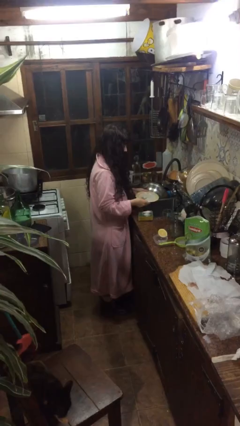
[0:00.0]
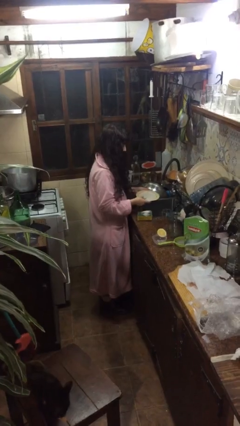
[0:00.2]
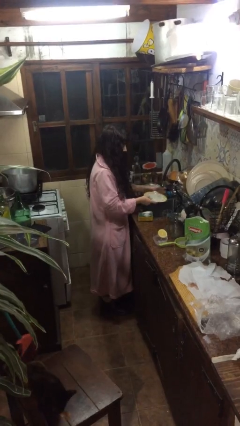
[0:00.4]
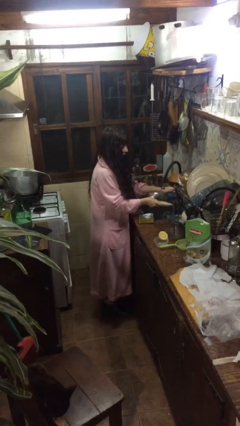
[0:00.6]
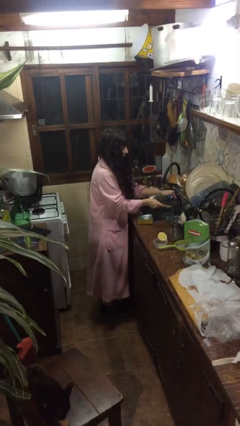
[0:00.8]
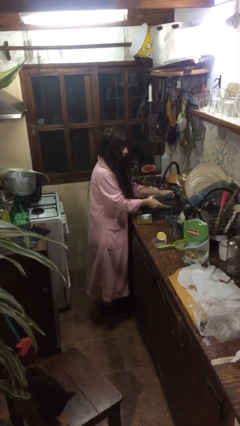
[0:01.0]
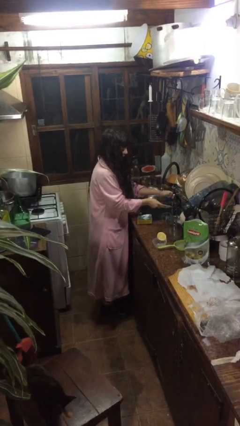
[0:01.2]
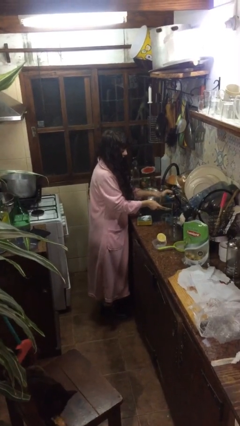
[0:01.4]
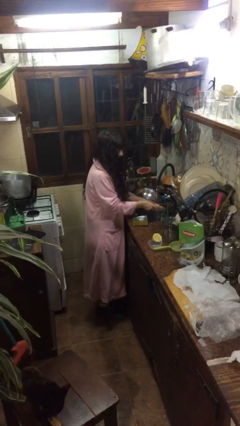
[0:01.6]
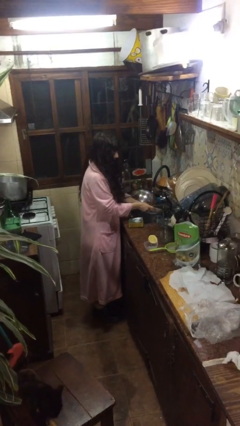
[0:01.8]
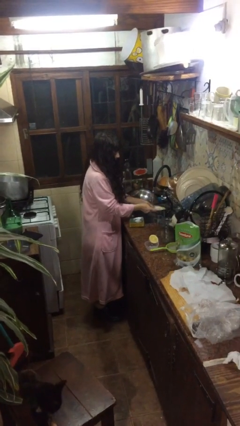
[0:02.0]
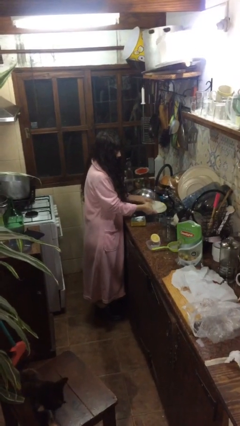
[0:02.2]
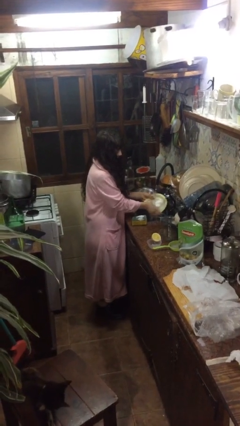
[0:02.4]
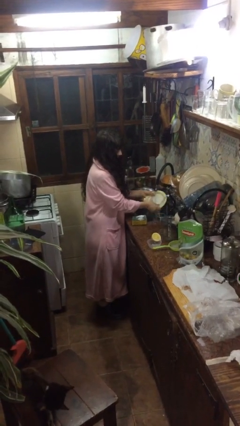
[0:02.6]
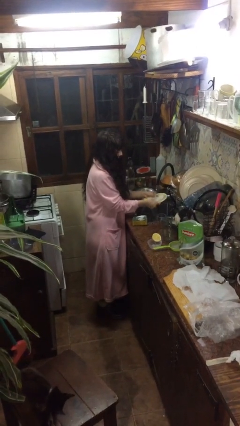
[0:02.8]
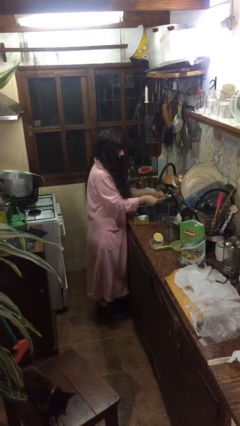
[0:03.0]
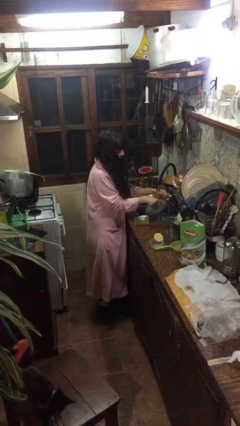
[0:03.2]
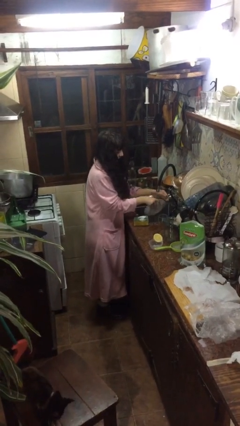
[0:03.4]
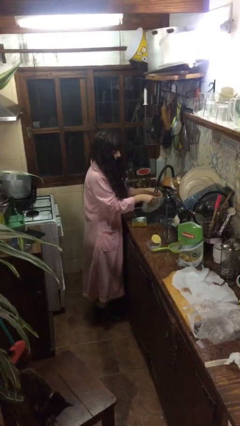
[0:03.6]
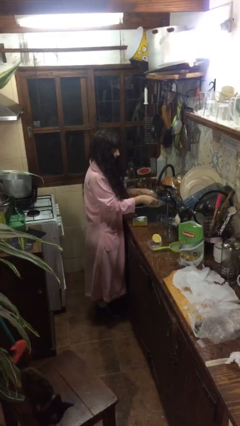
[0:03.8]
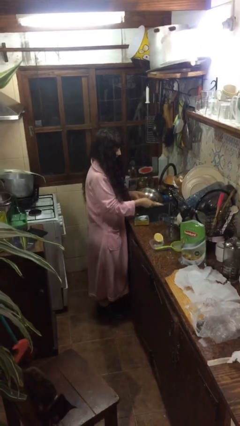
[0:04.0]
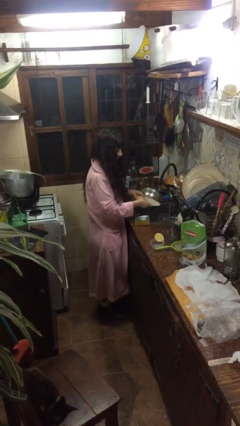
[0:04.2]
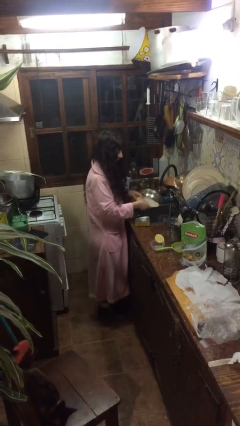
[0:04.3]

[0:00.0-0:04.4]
person washes dish

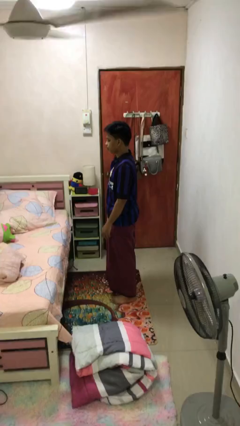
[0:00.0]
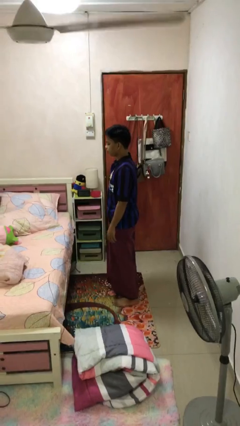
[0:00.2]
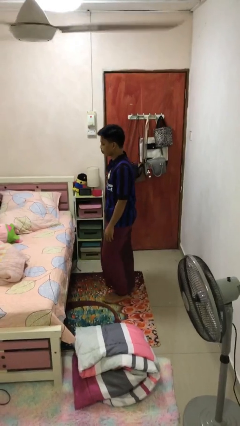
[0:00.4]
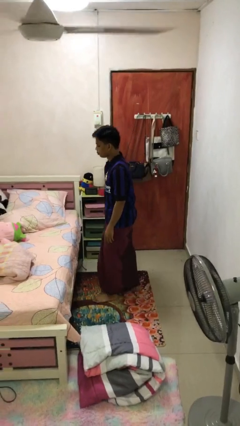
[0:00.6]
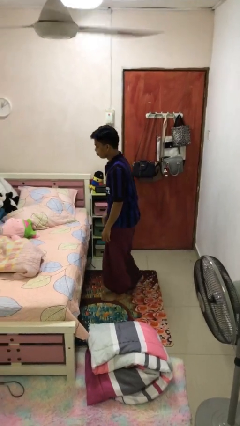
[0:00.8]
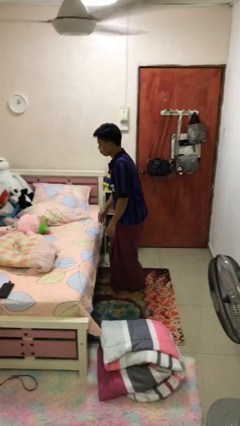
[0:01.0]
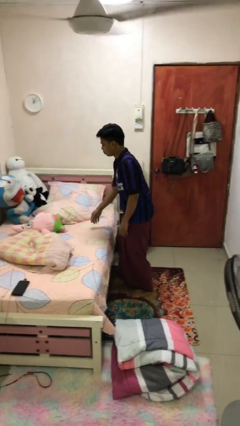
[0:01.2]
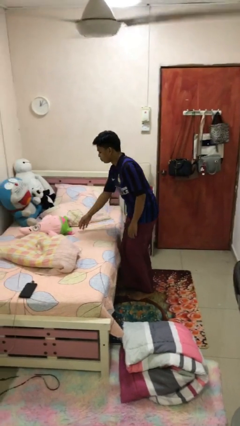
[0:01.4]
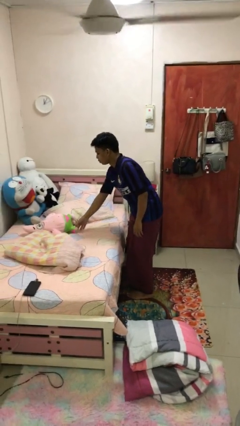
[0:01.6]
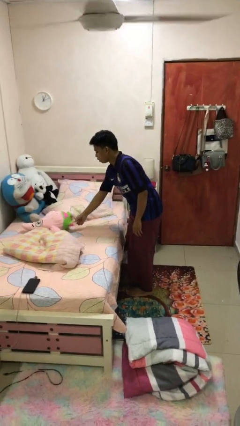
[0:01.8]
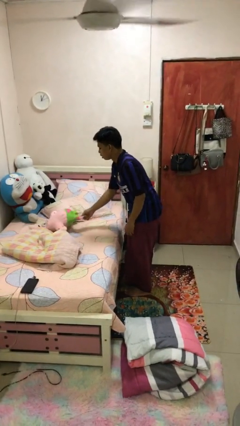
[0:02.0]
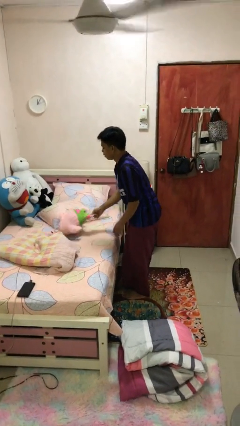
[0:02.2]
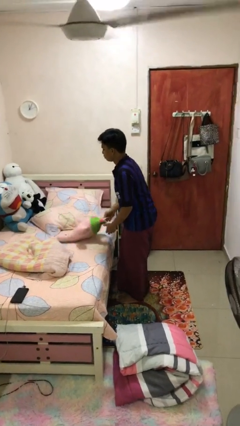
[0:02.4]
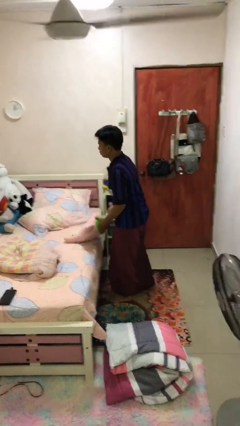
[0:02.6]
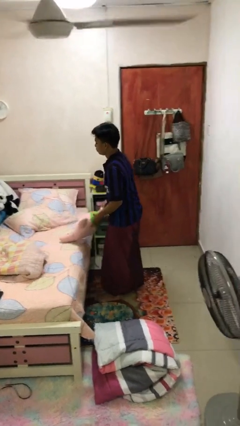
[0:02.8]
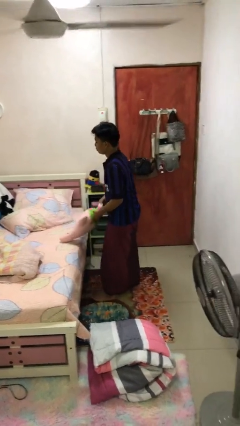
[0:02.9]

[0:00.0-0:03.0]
person picks up object from bed

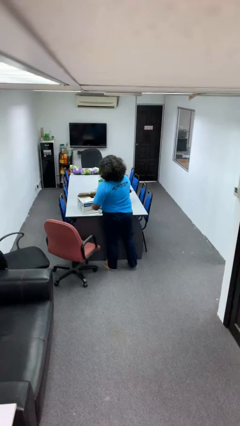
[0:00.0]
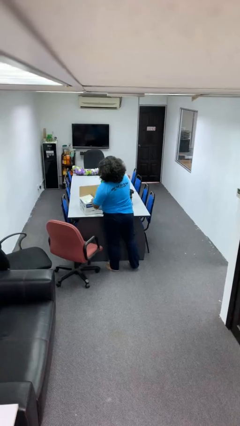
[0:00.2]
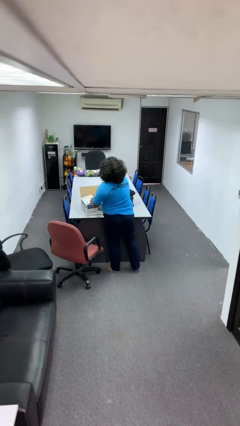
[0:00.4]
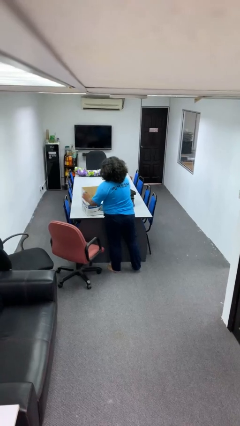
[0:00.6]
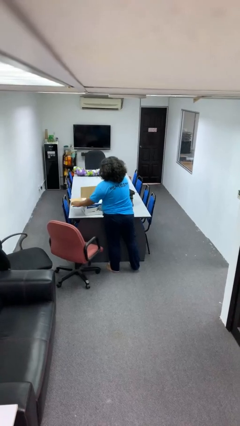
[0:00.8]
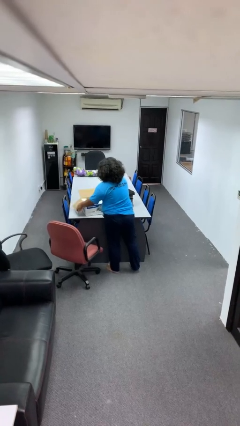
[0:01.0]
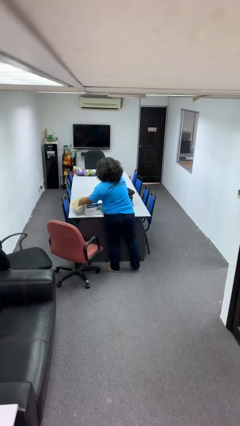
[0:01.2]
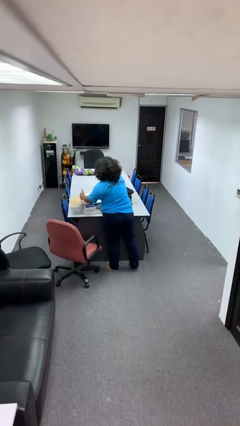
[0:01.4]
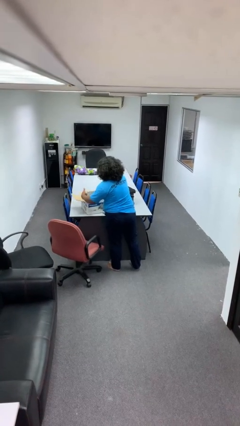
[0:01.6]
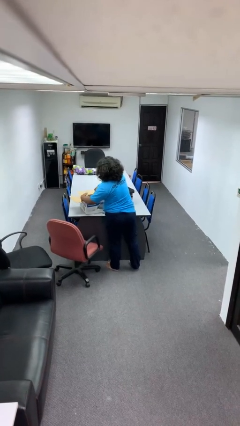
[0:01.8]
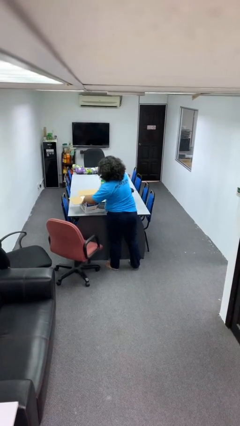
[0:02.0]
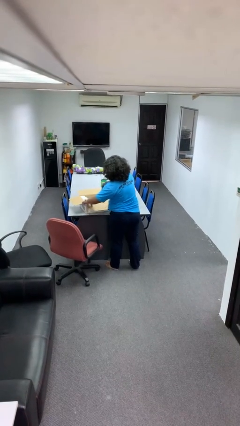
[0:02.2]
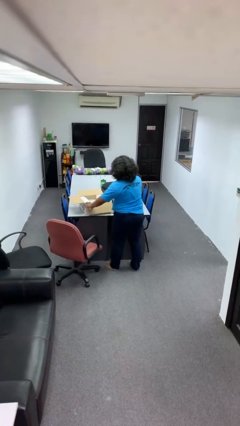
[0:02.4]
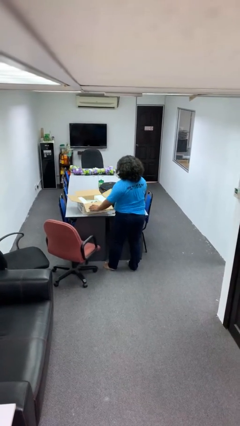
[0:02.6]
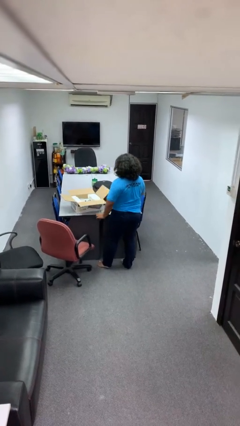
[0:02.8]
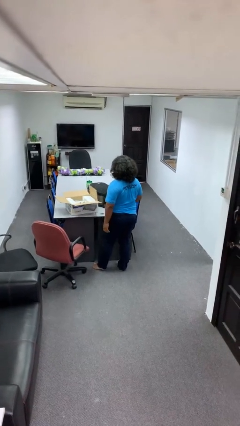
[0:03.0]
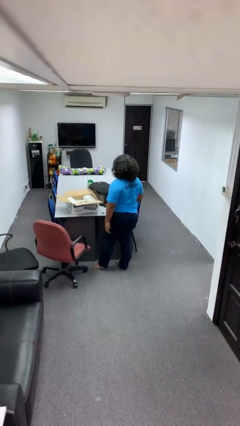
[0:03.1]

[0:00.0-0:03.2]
person opens box

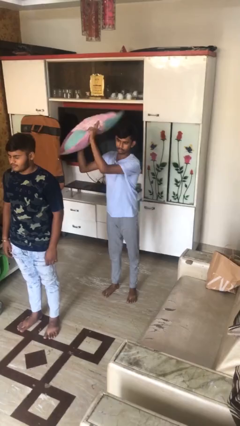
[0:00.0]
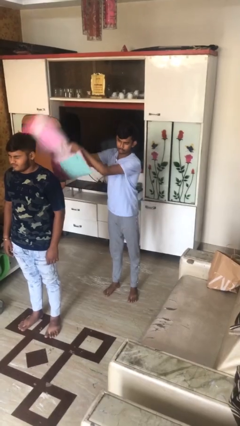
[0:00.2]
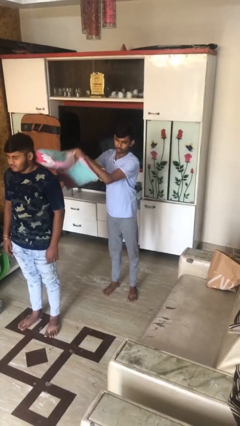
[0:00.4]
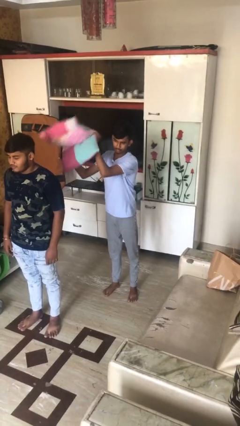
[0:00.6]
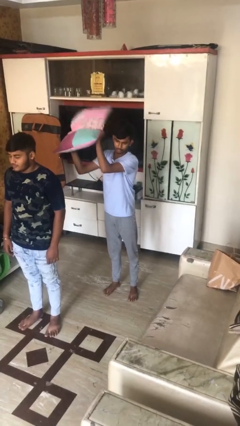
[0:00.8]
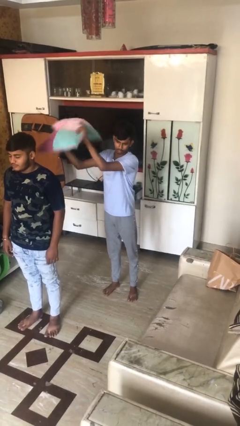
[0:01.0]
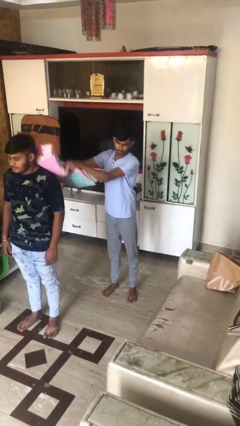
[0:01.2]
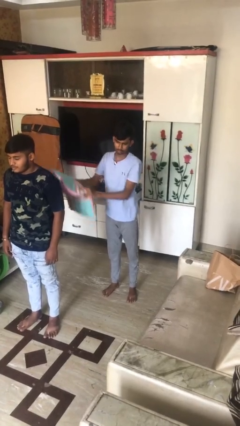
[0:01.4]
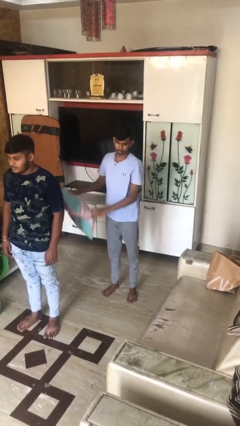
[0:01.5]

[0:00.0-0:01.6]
person hits person with pillow

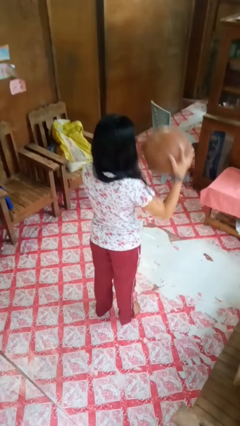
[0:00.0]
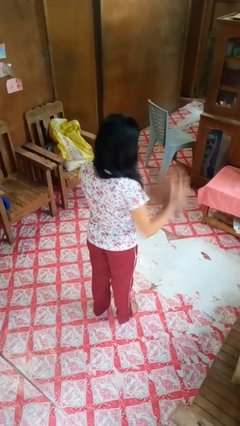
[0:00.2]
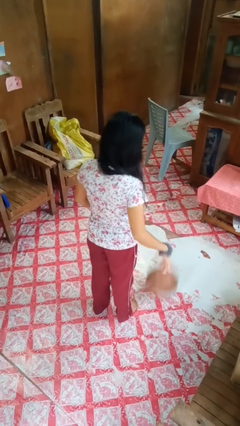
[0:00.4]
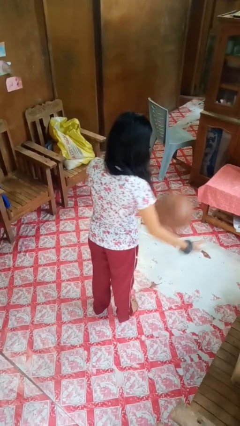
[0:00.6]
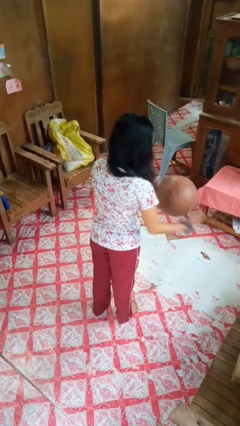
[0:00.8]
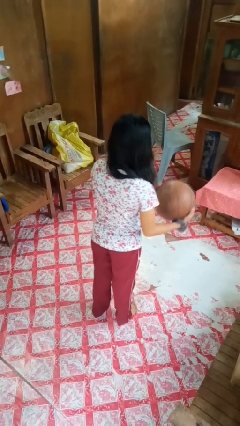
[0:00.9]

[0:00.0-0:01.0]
person bounces ball on floor

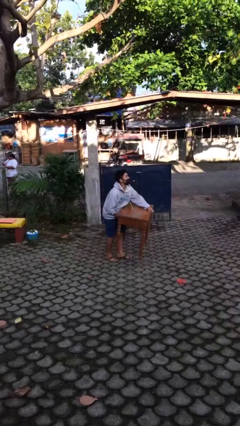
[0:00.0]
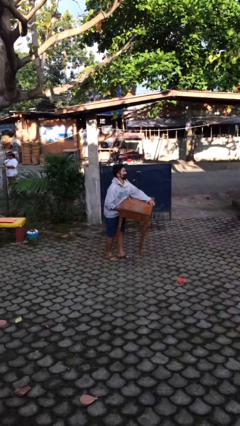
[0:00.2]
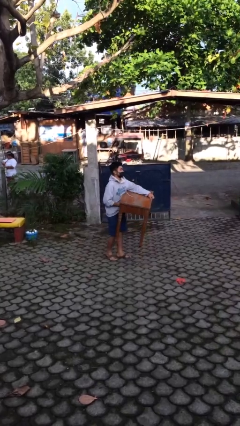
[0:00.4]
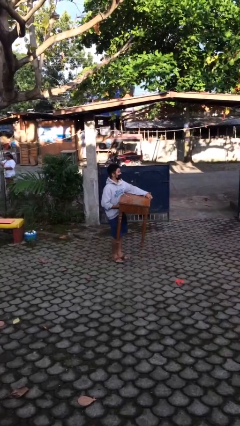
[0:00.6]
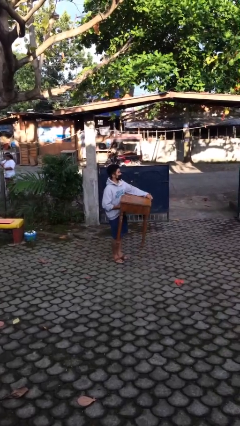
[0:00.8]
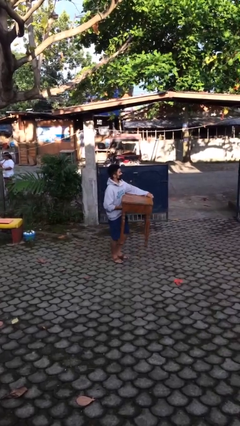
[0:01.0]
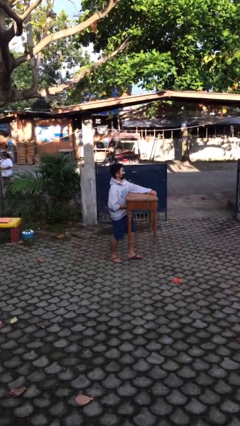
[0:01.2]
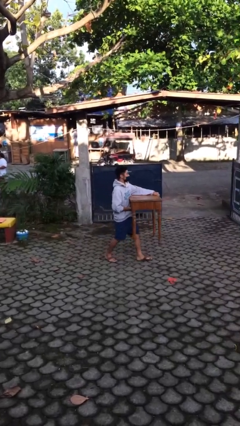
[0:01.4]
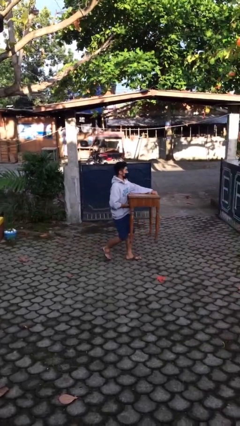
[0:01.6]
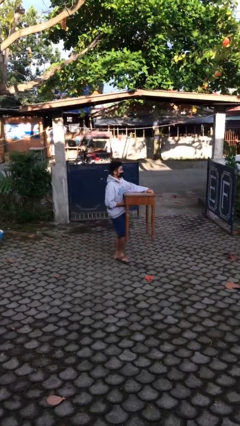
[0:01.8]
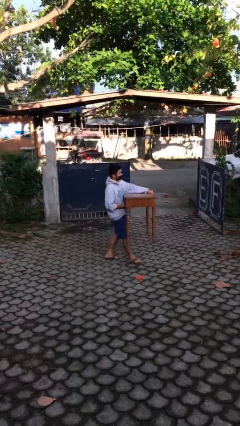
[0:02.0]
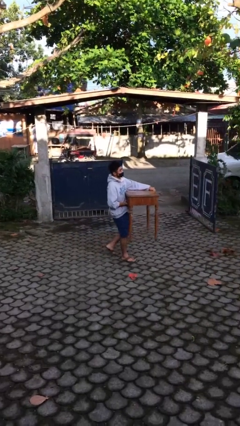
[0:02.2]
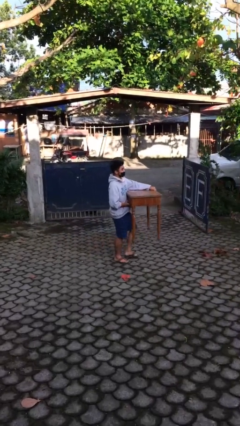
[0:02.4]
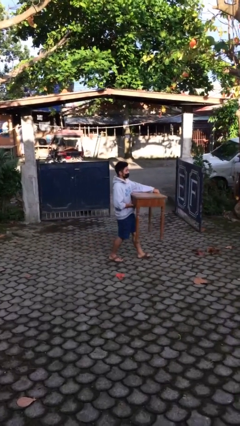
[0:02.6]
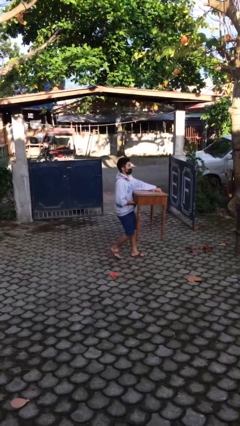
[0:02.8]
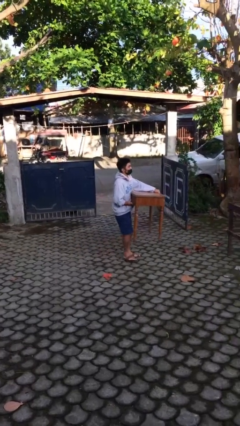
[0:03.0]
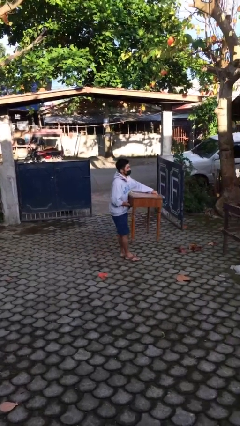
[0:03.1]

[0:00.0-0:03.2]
person carries heavy object

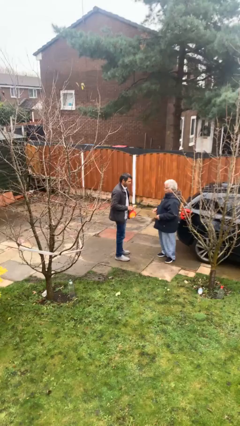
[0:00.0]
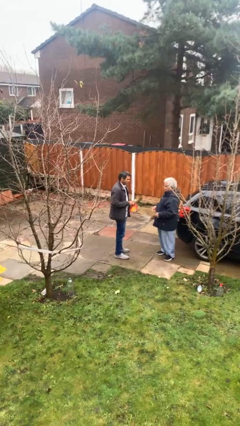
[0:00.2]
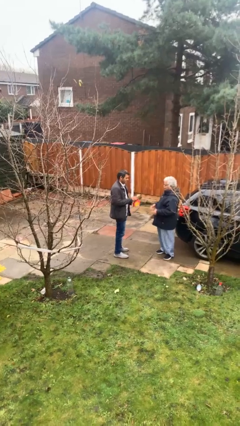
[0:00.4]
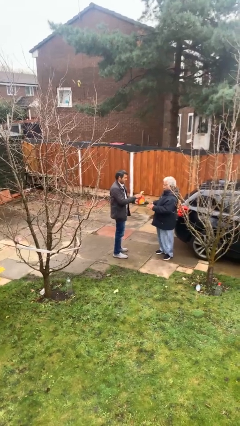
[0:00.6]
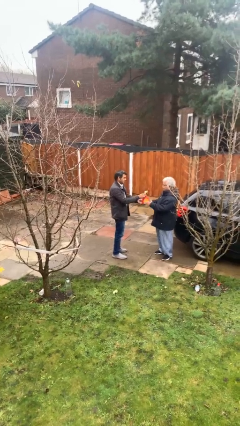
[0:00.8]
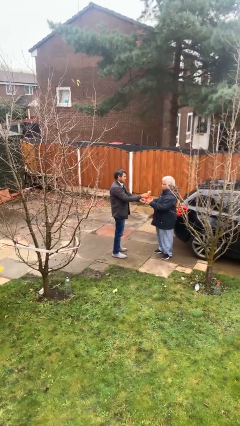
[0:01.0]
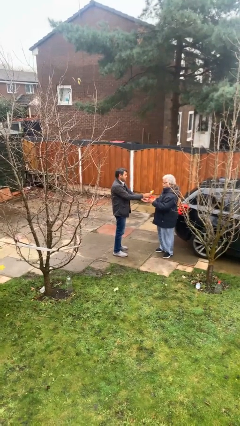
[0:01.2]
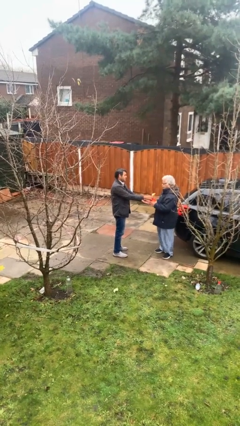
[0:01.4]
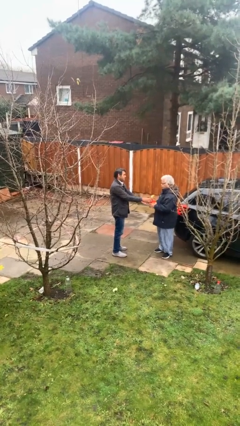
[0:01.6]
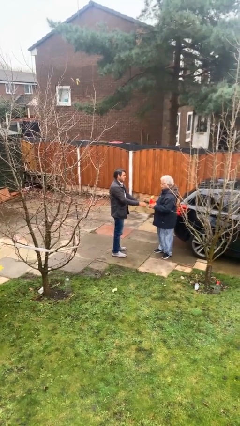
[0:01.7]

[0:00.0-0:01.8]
person transfers object to person
